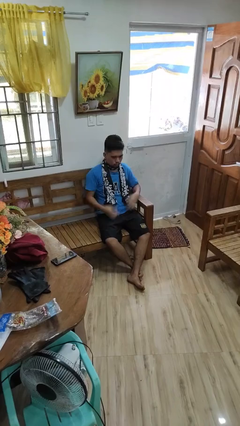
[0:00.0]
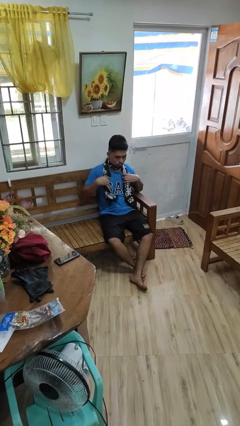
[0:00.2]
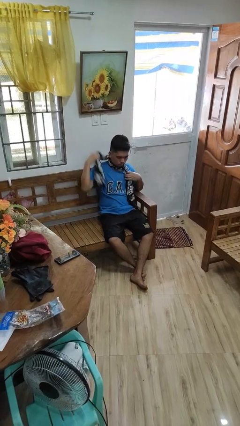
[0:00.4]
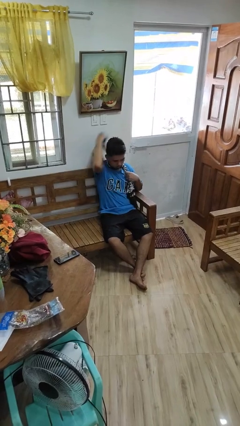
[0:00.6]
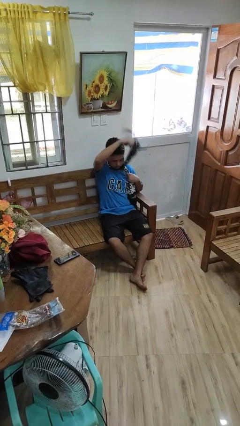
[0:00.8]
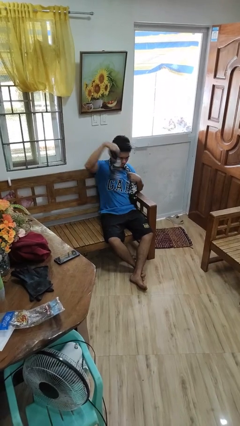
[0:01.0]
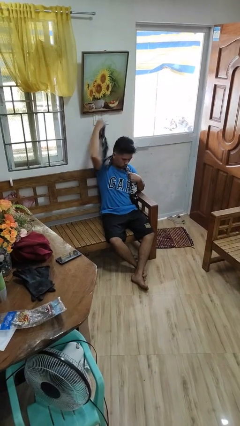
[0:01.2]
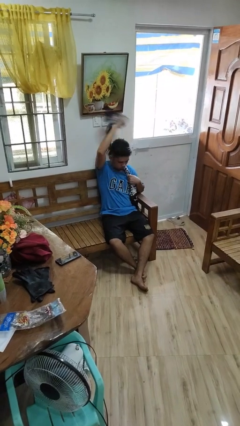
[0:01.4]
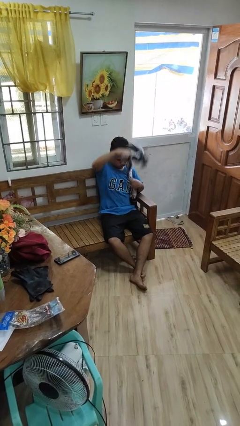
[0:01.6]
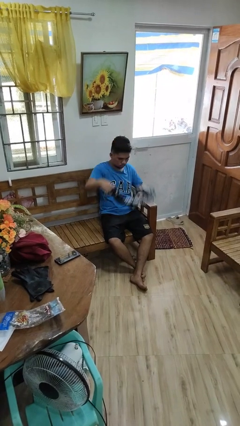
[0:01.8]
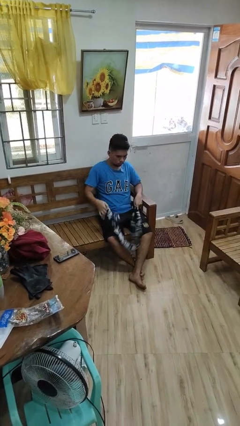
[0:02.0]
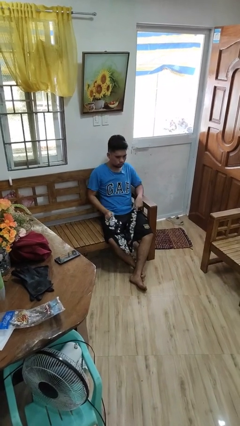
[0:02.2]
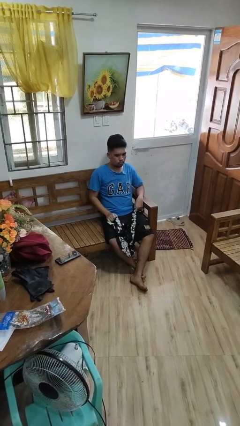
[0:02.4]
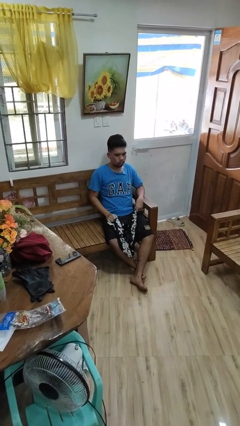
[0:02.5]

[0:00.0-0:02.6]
person takes off scarf

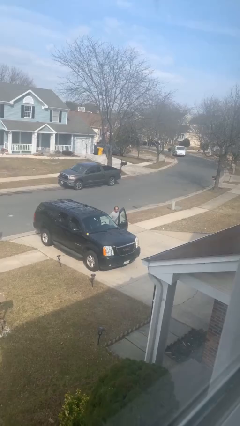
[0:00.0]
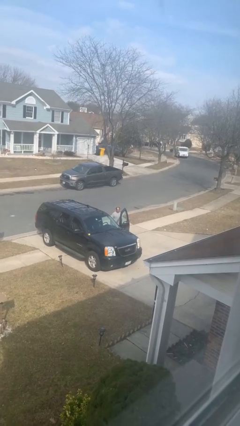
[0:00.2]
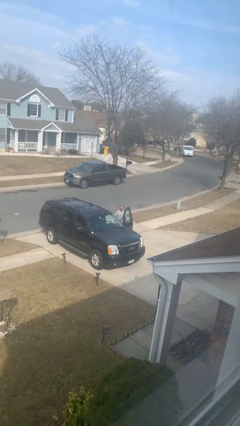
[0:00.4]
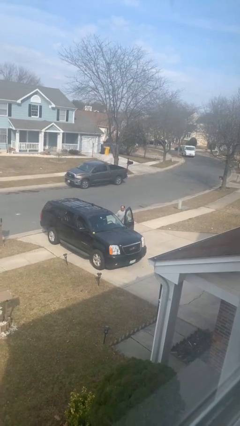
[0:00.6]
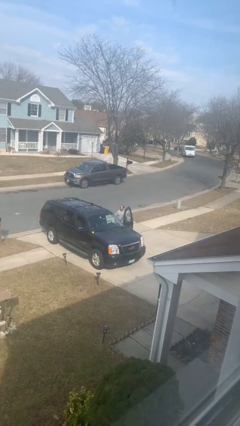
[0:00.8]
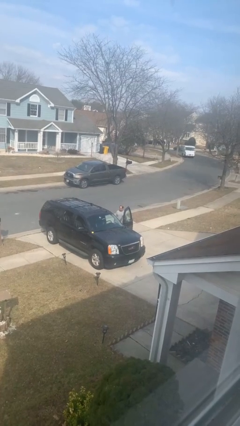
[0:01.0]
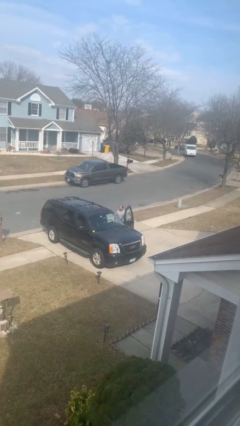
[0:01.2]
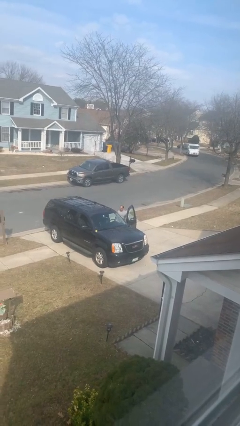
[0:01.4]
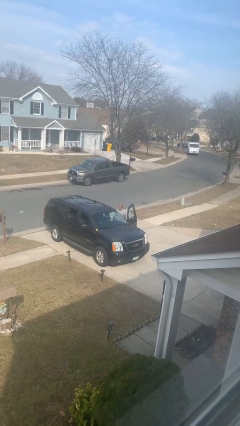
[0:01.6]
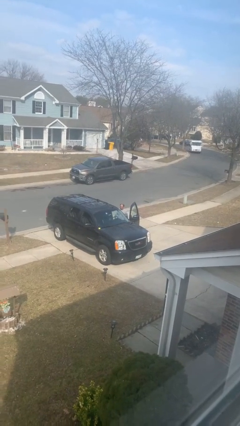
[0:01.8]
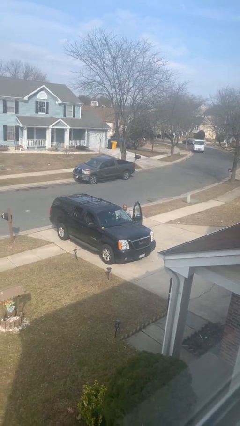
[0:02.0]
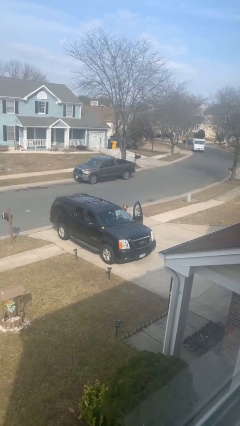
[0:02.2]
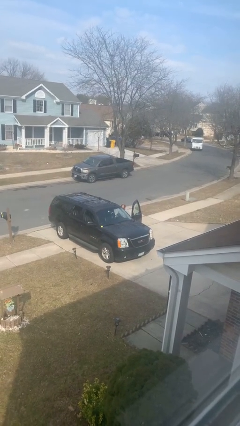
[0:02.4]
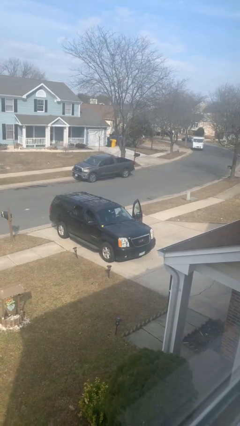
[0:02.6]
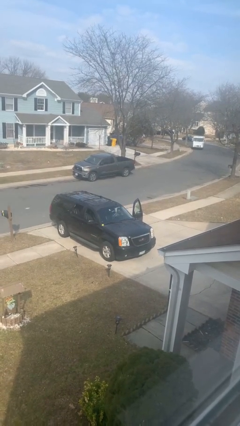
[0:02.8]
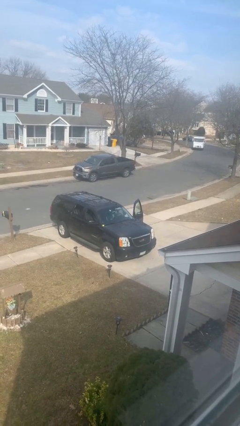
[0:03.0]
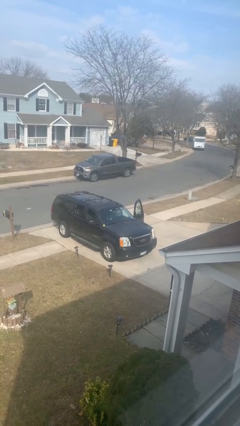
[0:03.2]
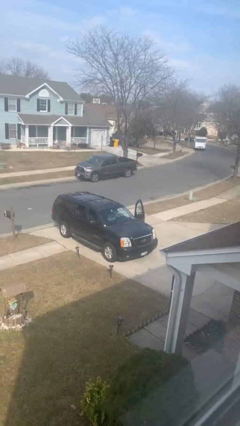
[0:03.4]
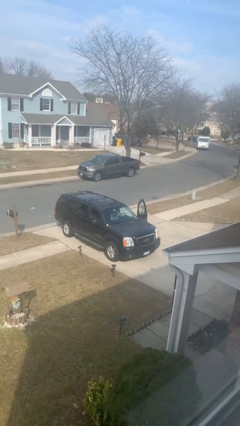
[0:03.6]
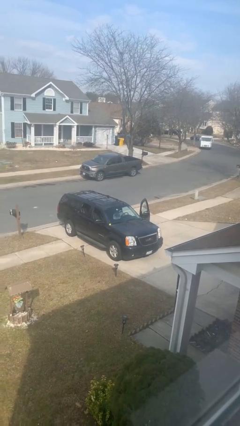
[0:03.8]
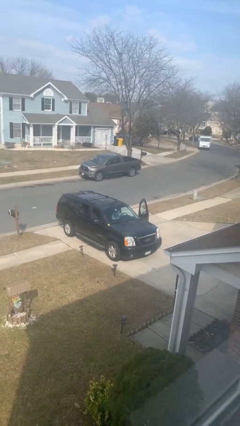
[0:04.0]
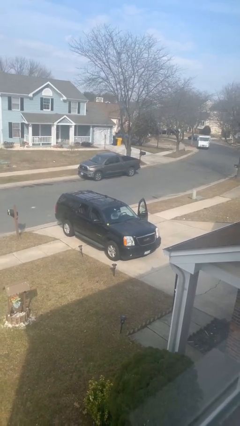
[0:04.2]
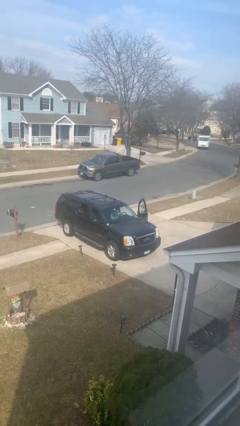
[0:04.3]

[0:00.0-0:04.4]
person enters car

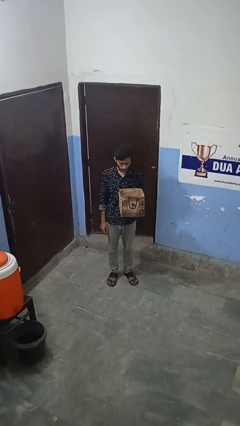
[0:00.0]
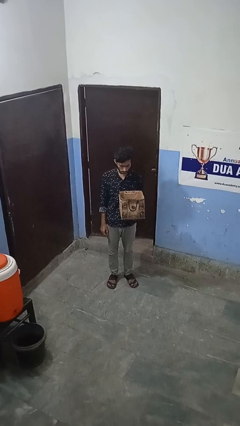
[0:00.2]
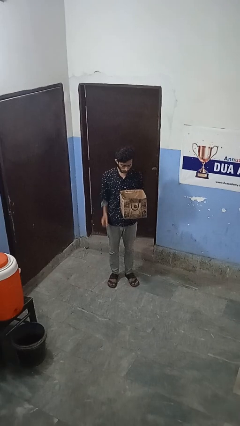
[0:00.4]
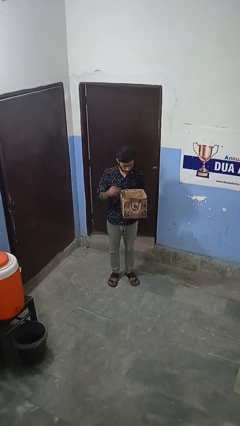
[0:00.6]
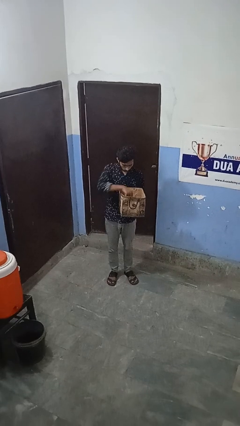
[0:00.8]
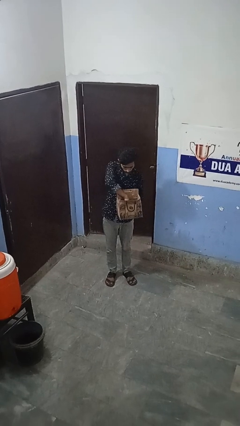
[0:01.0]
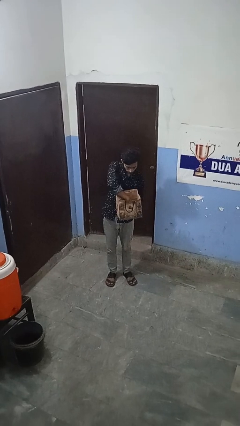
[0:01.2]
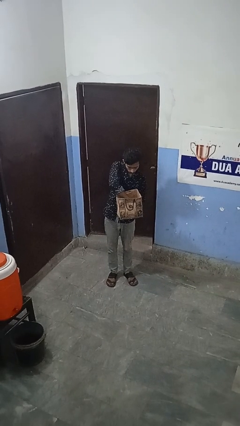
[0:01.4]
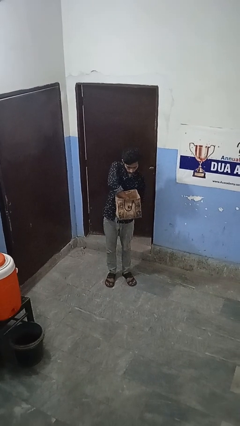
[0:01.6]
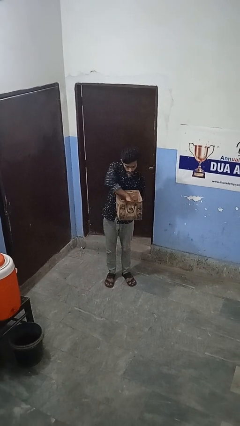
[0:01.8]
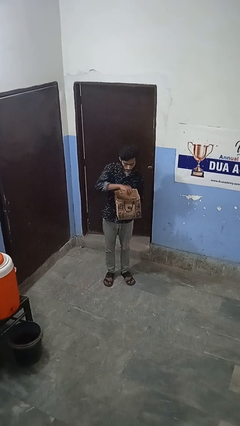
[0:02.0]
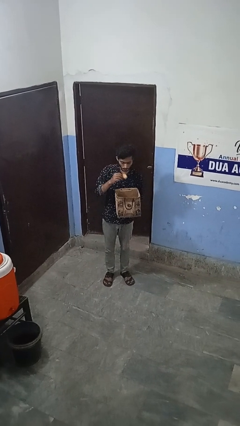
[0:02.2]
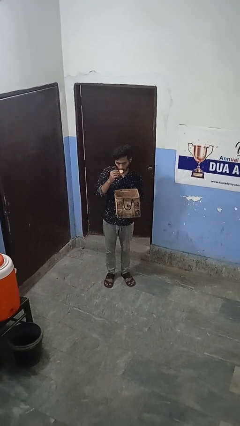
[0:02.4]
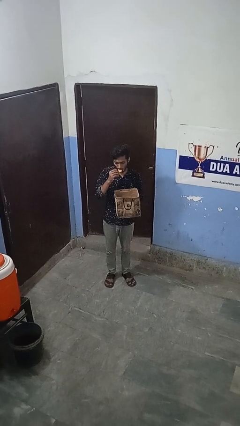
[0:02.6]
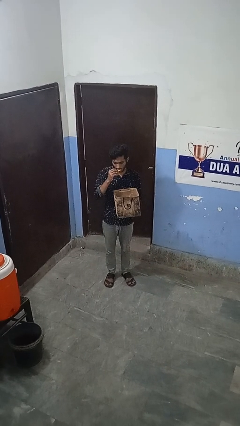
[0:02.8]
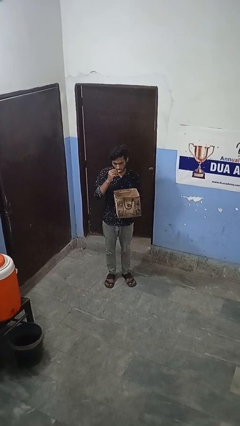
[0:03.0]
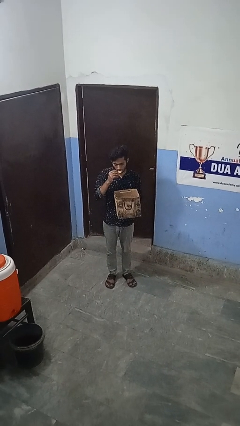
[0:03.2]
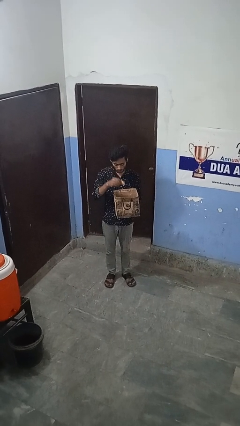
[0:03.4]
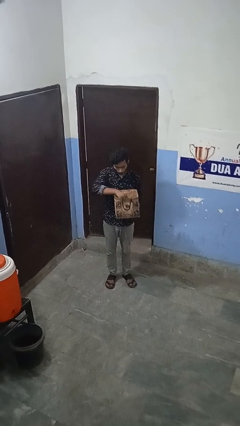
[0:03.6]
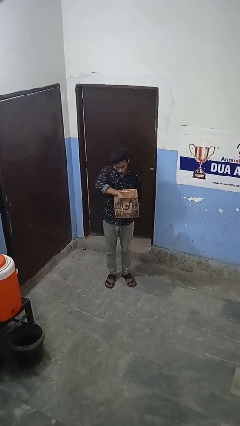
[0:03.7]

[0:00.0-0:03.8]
person eats snack from bag

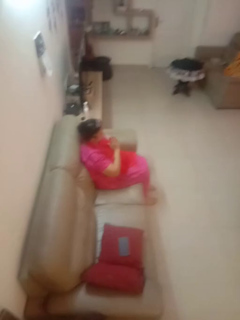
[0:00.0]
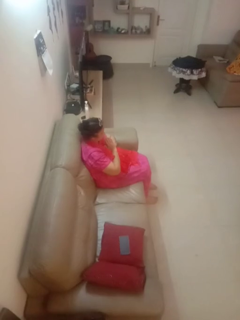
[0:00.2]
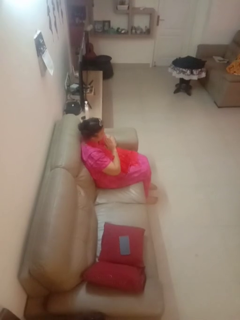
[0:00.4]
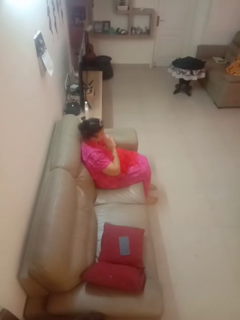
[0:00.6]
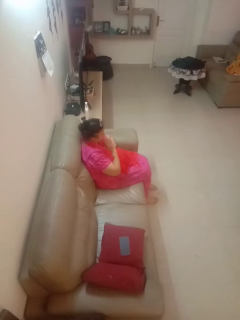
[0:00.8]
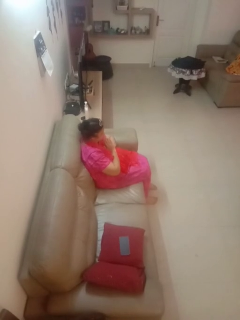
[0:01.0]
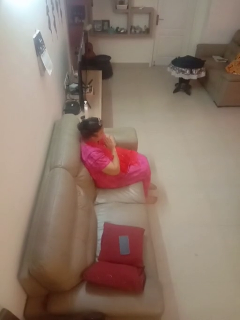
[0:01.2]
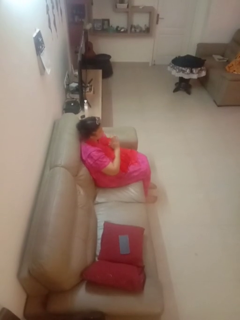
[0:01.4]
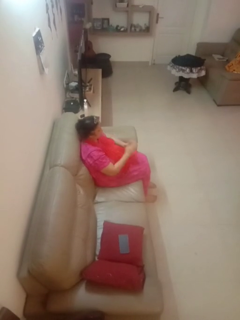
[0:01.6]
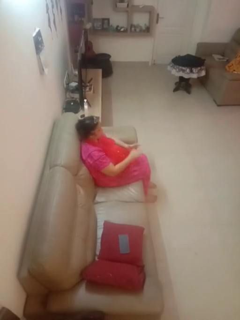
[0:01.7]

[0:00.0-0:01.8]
person prays

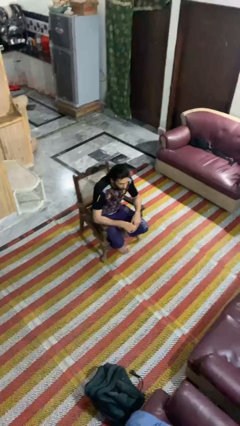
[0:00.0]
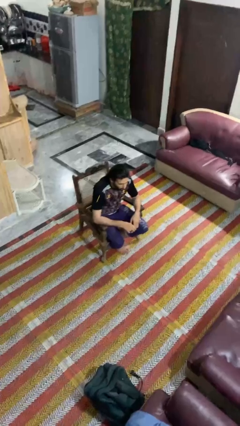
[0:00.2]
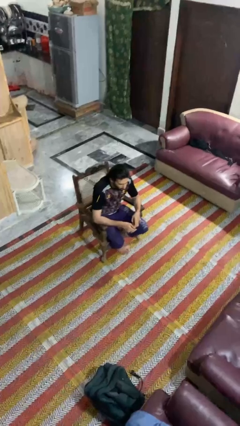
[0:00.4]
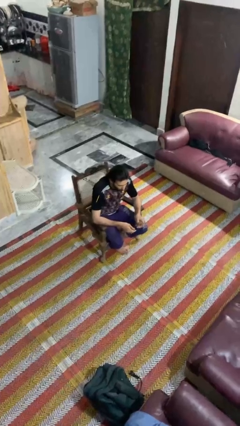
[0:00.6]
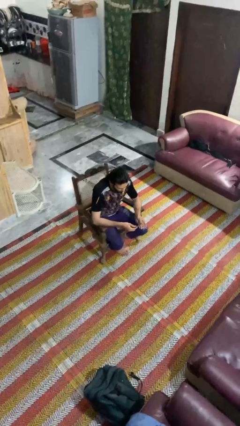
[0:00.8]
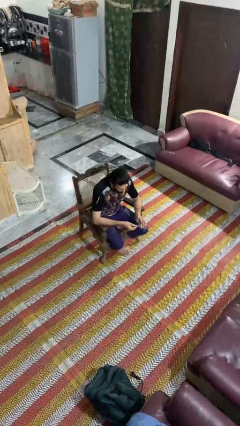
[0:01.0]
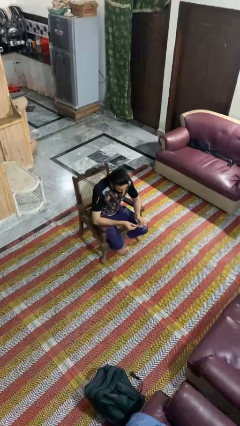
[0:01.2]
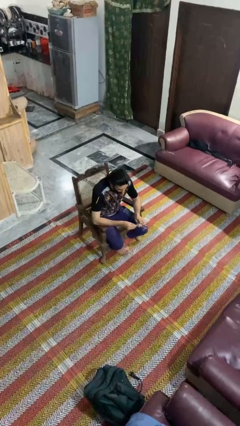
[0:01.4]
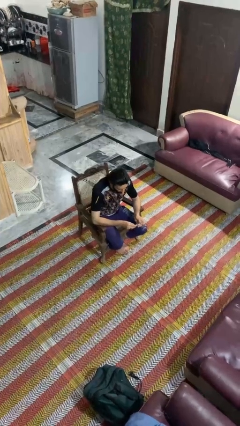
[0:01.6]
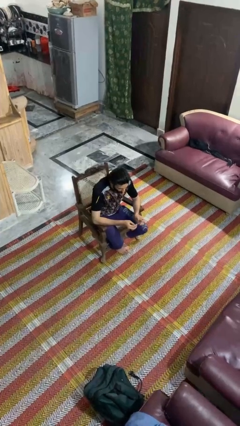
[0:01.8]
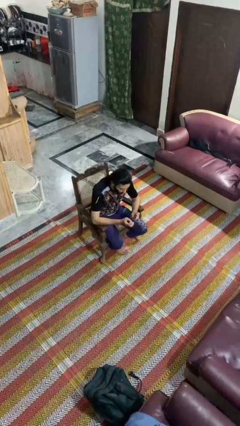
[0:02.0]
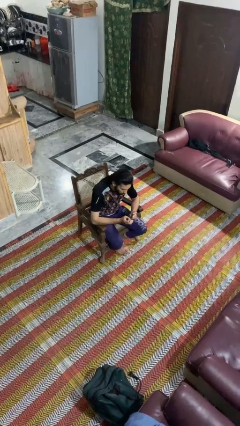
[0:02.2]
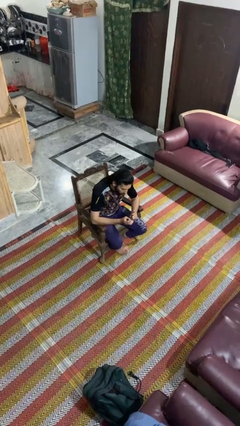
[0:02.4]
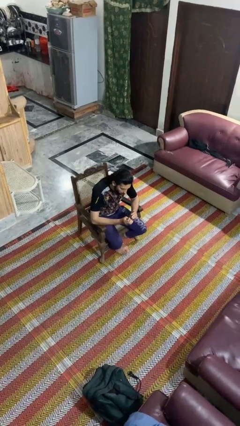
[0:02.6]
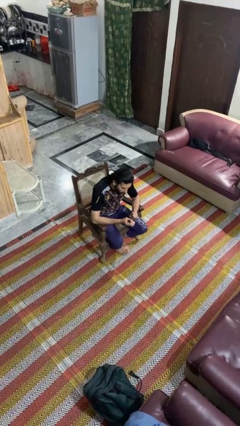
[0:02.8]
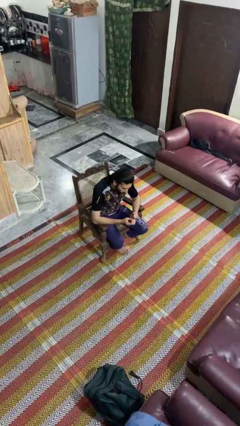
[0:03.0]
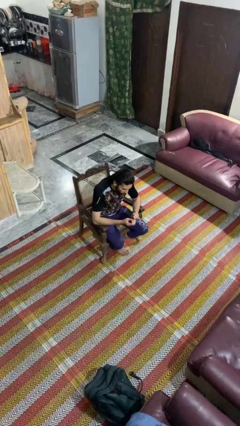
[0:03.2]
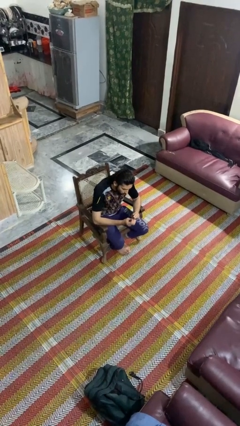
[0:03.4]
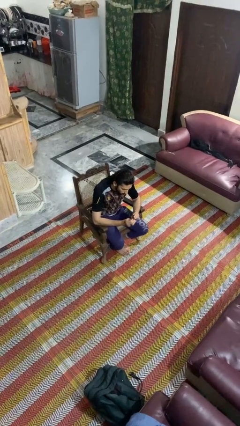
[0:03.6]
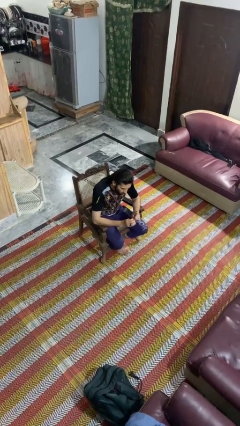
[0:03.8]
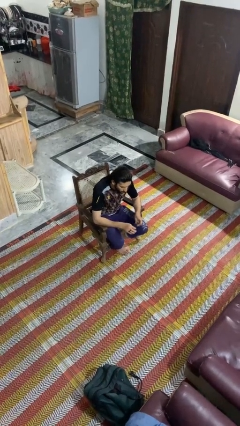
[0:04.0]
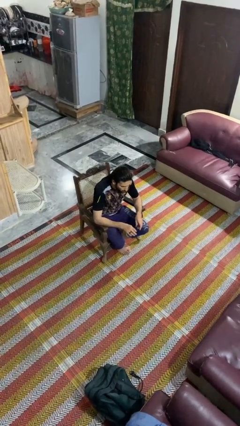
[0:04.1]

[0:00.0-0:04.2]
person clips fingernails

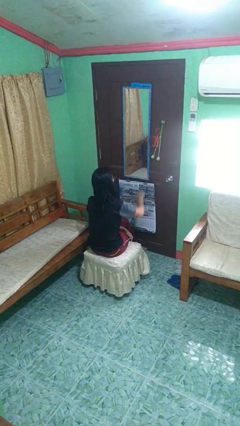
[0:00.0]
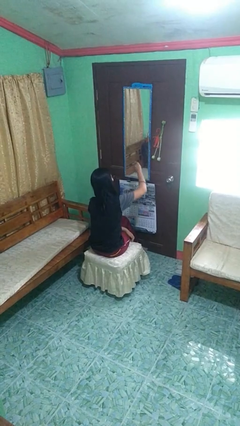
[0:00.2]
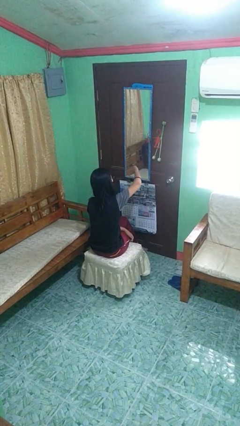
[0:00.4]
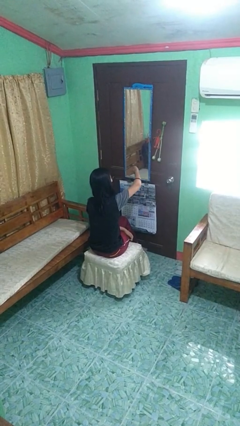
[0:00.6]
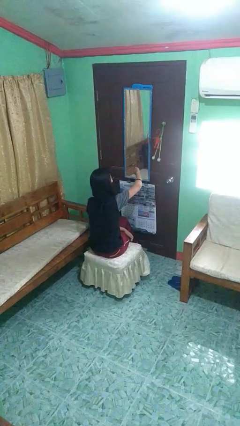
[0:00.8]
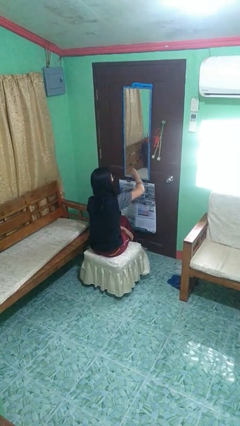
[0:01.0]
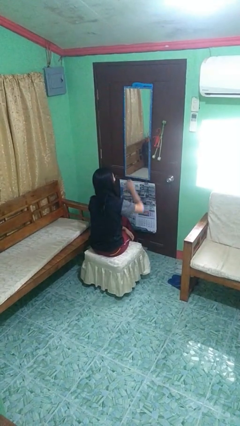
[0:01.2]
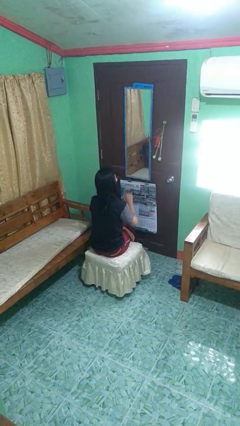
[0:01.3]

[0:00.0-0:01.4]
person gestures thumbs down
